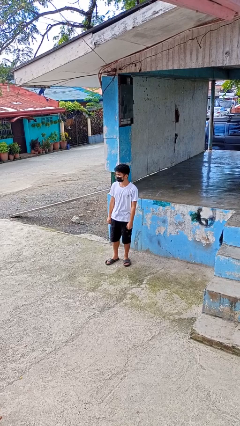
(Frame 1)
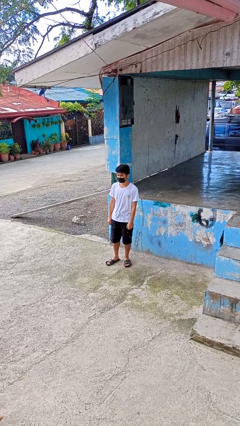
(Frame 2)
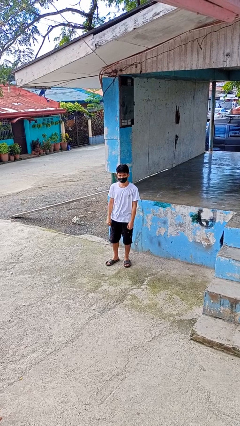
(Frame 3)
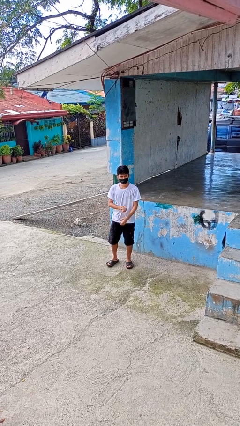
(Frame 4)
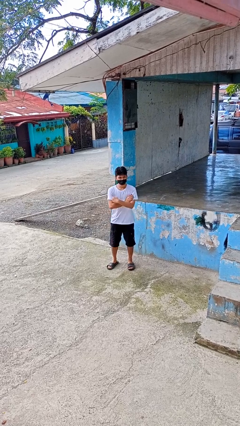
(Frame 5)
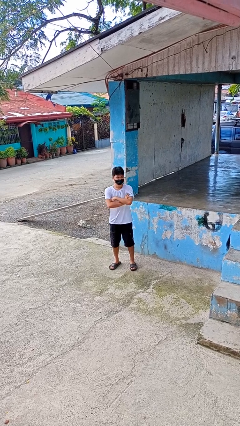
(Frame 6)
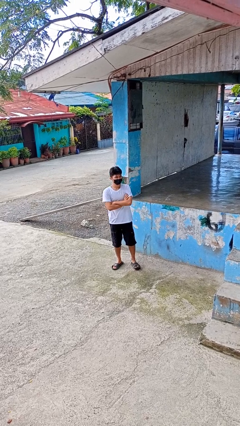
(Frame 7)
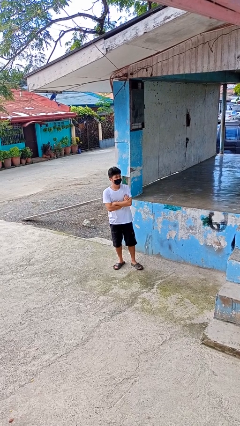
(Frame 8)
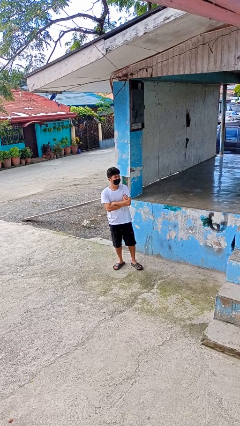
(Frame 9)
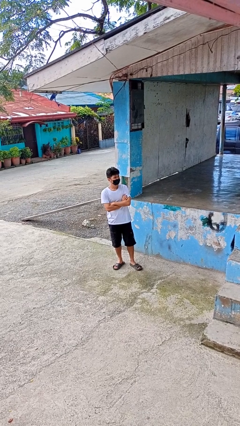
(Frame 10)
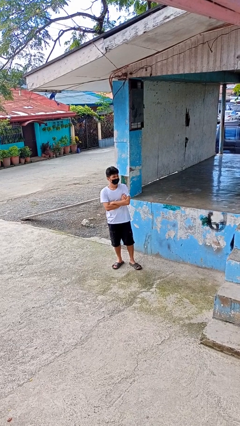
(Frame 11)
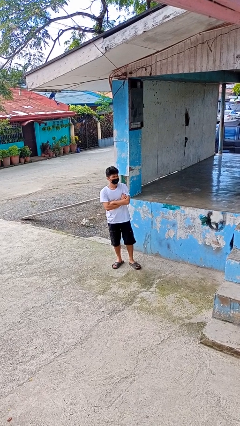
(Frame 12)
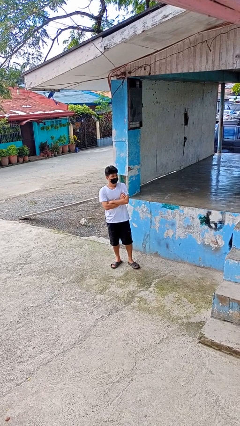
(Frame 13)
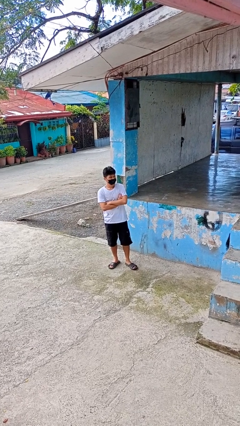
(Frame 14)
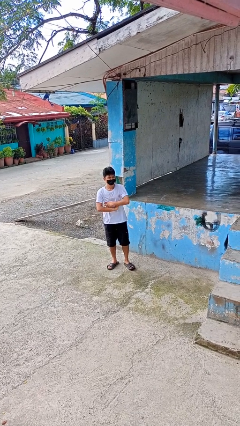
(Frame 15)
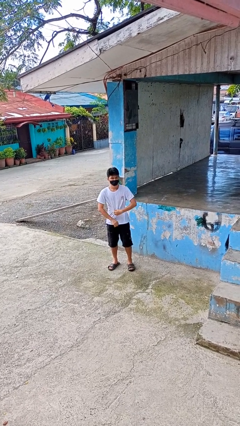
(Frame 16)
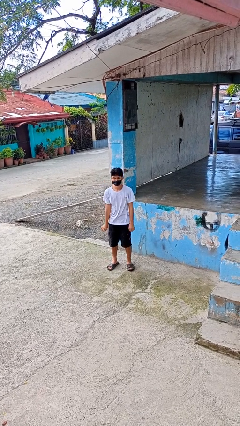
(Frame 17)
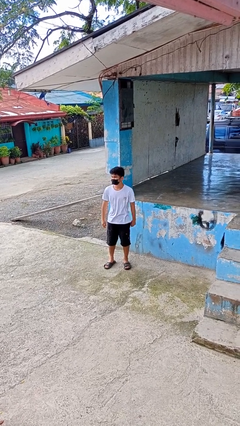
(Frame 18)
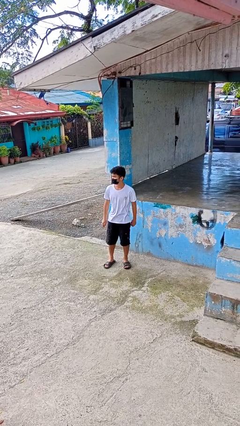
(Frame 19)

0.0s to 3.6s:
person crosses arms

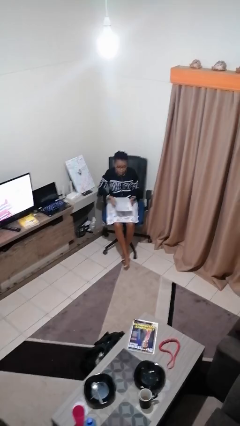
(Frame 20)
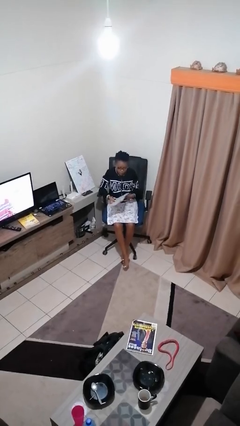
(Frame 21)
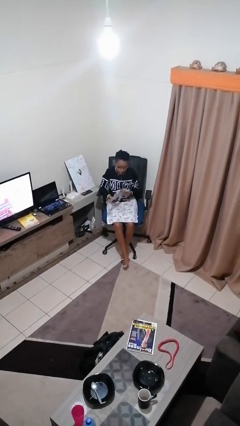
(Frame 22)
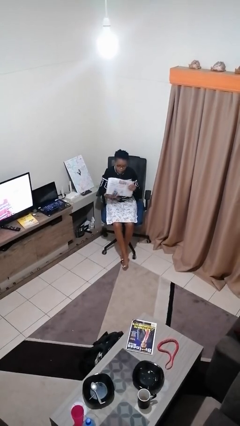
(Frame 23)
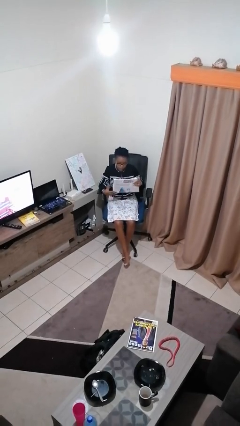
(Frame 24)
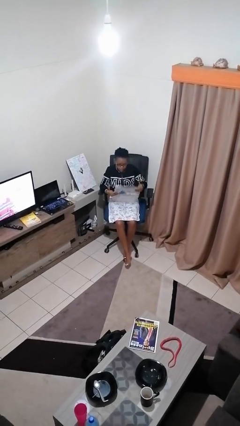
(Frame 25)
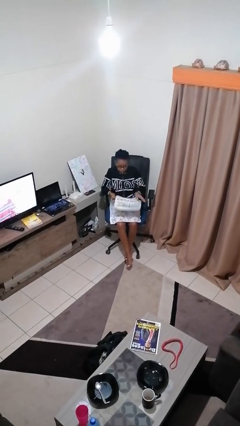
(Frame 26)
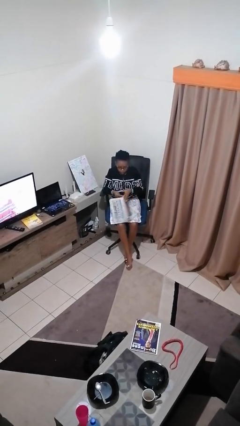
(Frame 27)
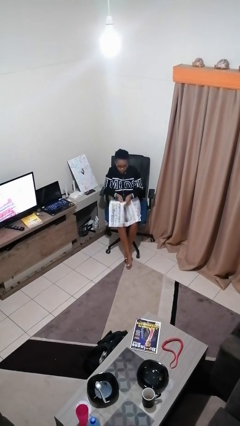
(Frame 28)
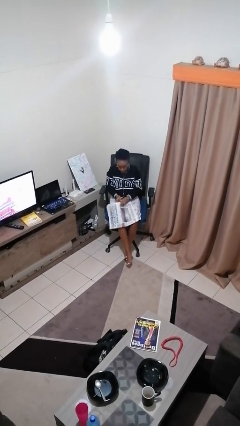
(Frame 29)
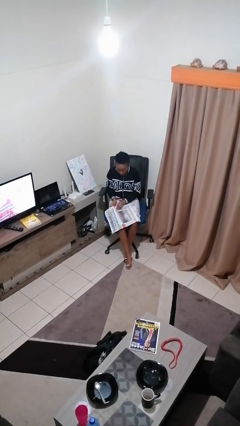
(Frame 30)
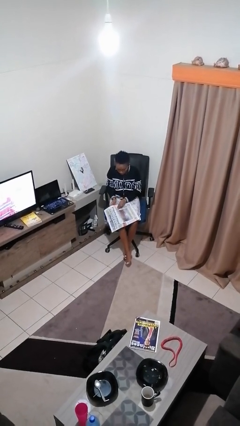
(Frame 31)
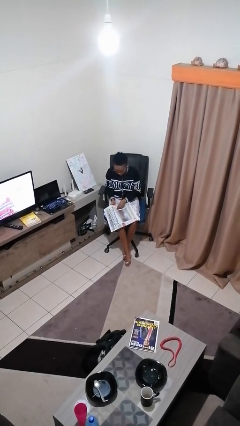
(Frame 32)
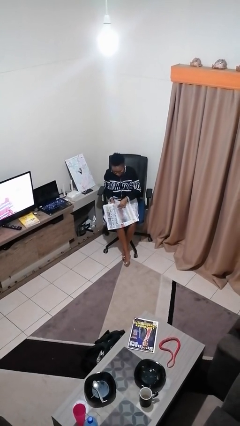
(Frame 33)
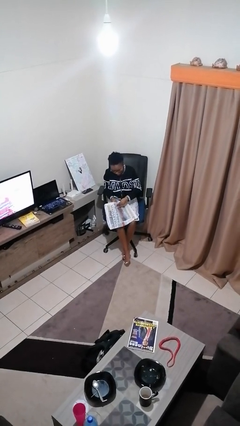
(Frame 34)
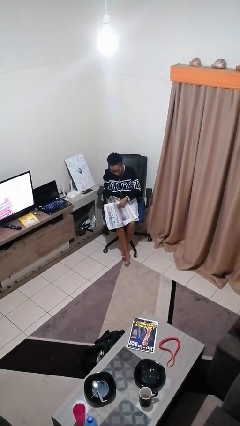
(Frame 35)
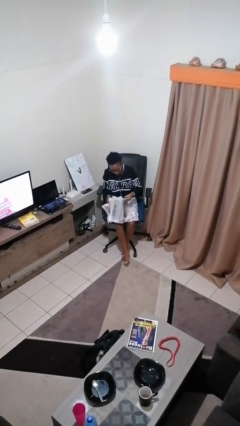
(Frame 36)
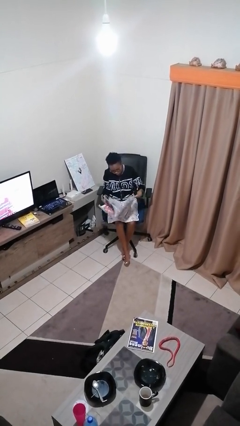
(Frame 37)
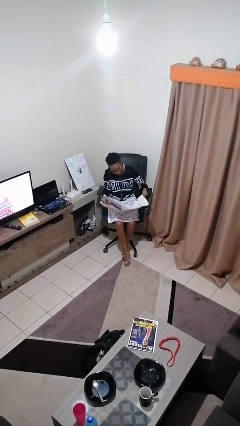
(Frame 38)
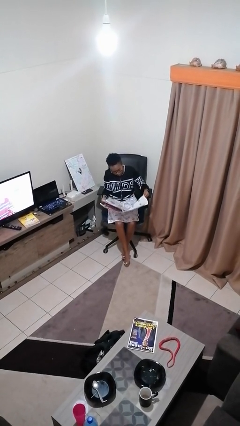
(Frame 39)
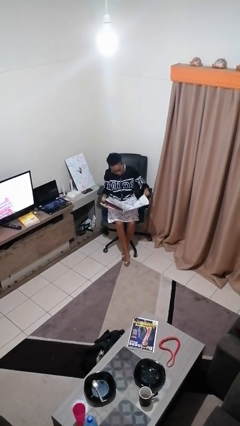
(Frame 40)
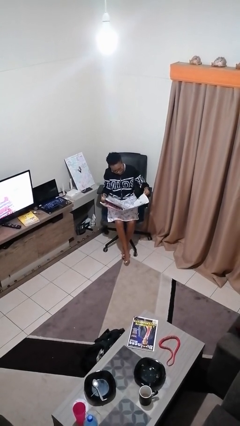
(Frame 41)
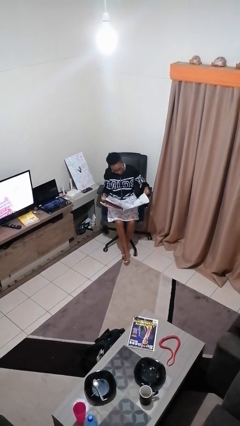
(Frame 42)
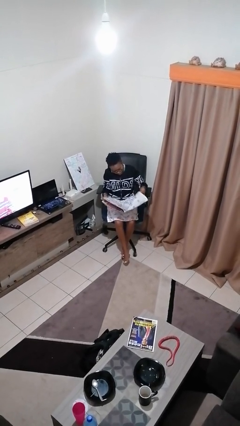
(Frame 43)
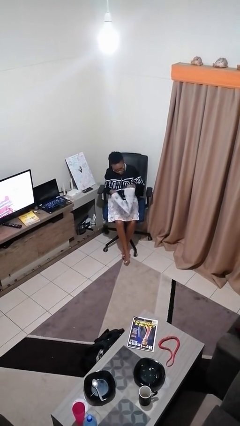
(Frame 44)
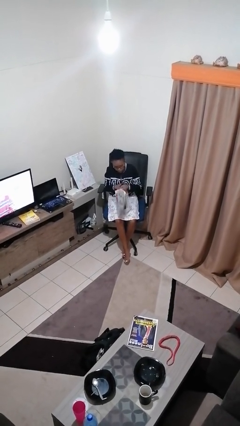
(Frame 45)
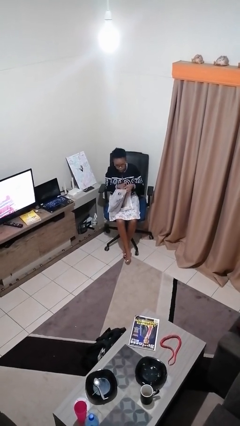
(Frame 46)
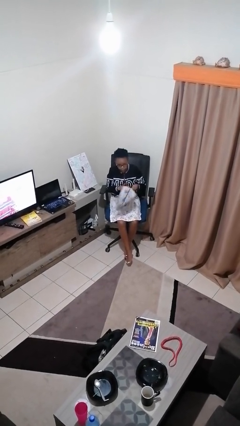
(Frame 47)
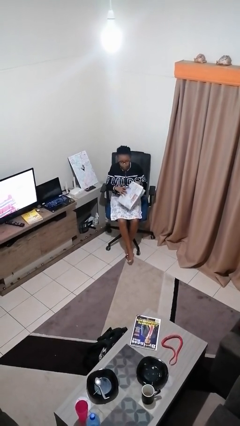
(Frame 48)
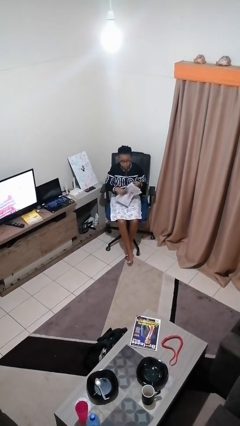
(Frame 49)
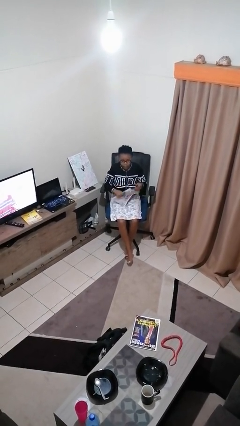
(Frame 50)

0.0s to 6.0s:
person reads newspaper

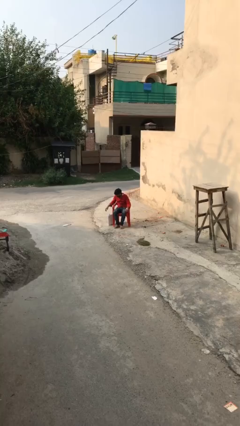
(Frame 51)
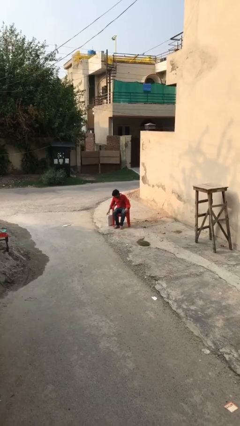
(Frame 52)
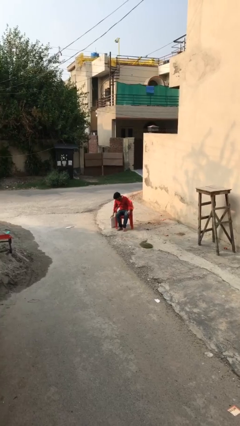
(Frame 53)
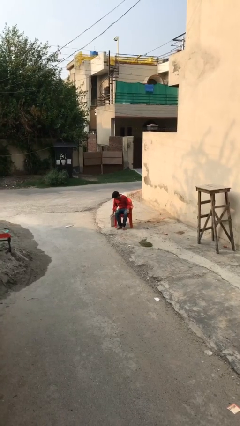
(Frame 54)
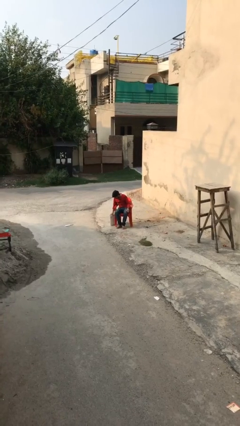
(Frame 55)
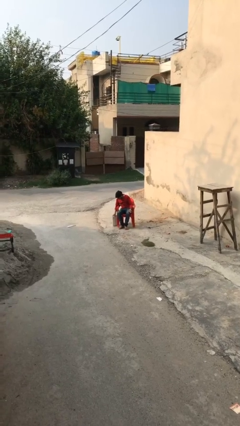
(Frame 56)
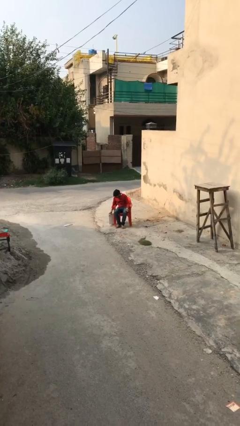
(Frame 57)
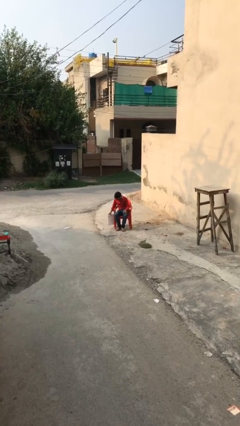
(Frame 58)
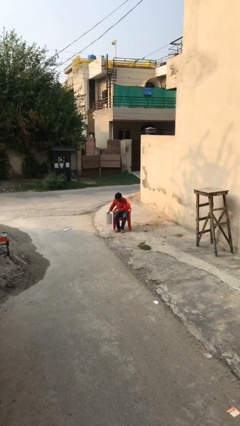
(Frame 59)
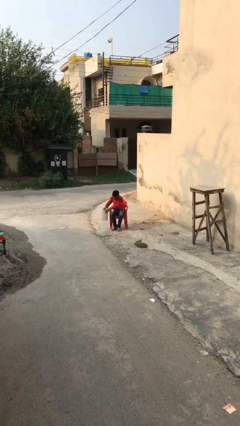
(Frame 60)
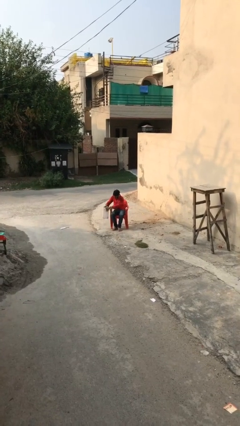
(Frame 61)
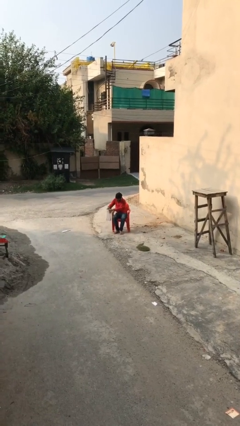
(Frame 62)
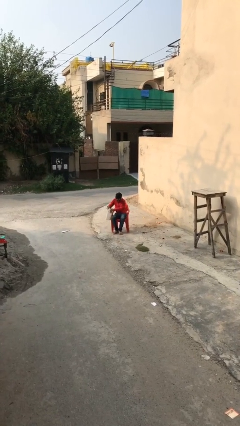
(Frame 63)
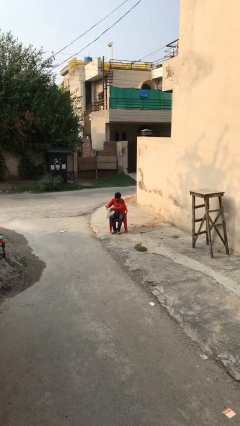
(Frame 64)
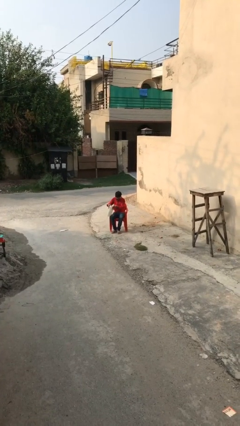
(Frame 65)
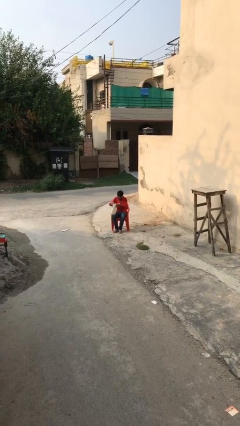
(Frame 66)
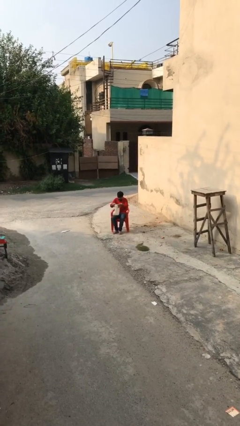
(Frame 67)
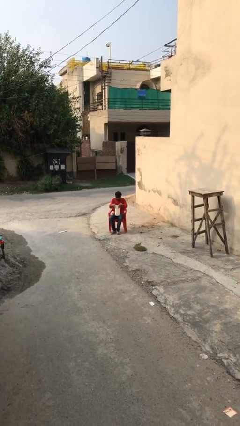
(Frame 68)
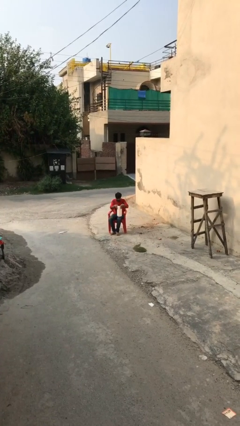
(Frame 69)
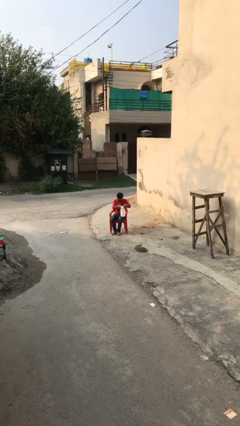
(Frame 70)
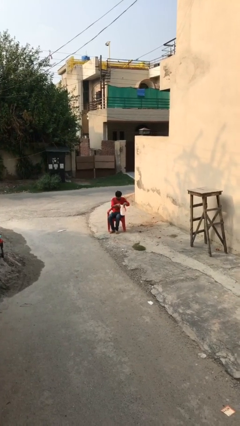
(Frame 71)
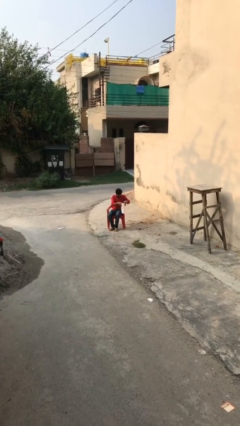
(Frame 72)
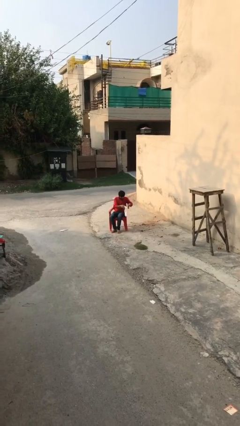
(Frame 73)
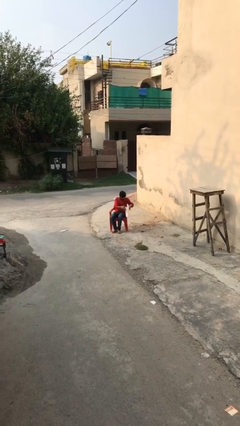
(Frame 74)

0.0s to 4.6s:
person picks up object from floor

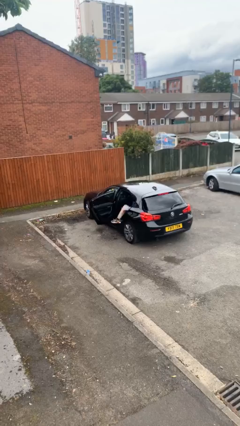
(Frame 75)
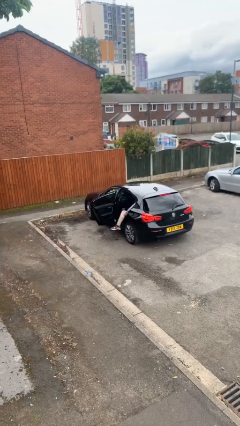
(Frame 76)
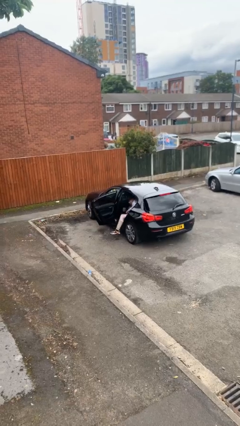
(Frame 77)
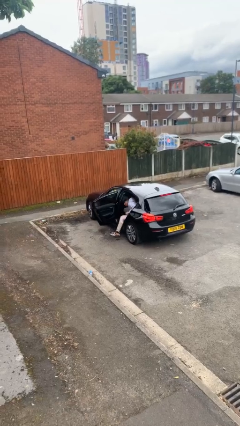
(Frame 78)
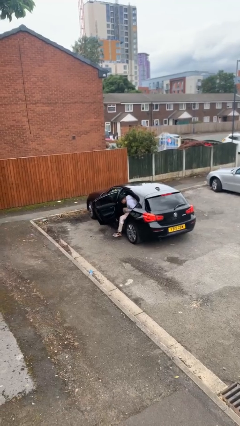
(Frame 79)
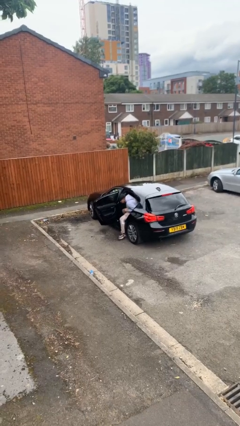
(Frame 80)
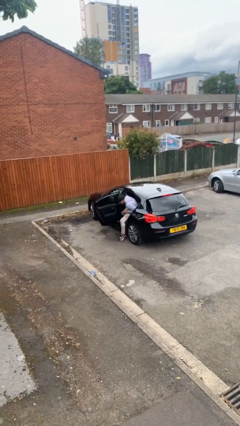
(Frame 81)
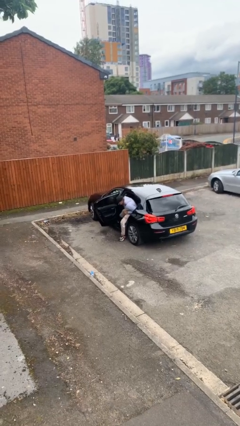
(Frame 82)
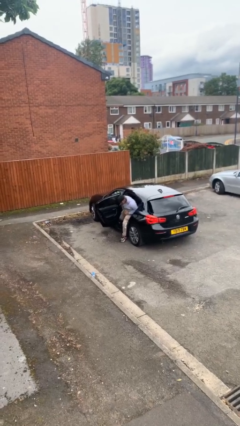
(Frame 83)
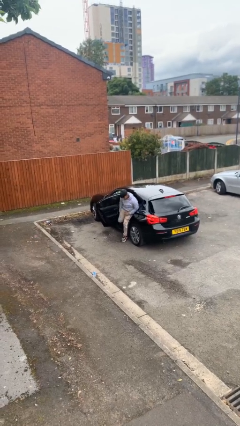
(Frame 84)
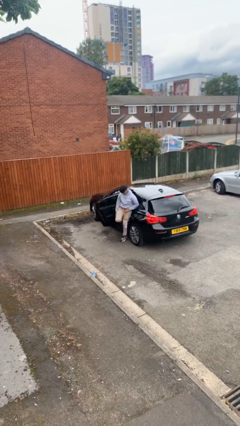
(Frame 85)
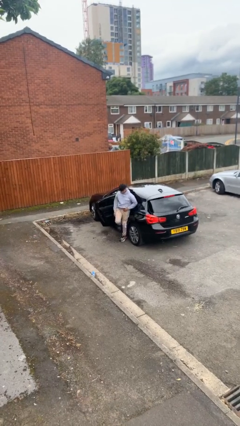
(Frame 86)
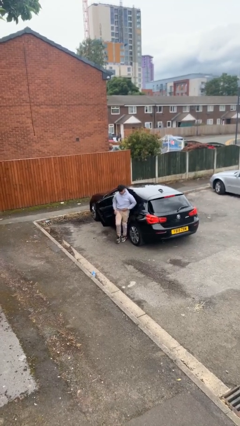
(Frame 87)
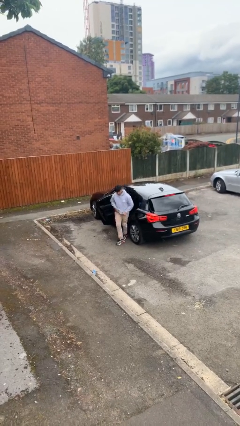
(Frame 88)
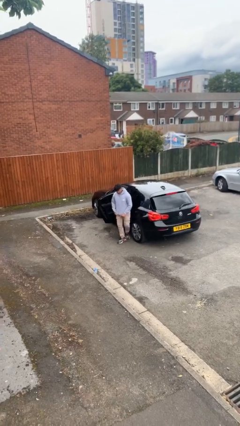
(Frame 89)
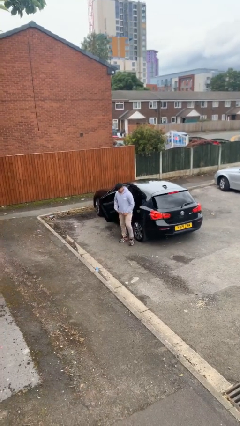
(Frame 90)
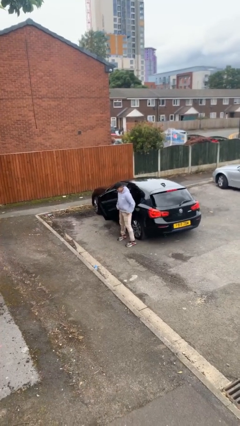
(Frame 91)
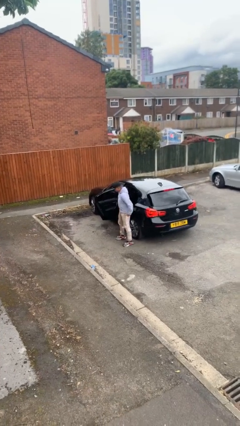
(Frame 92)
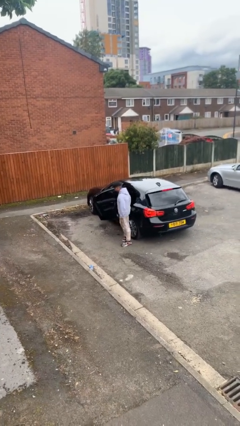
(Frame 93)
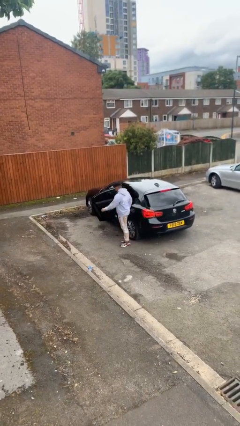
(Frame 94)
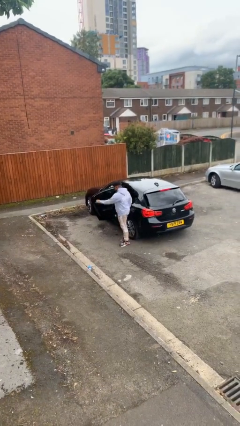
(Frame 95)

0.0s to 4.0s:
person exits car
